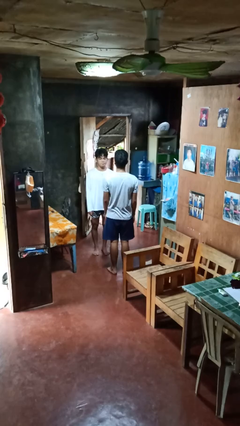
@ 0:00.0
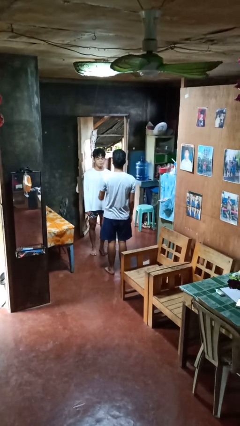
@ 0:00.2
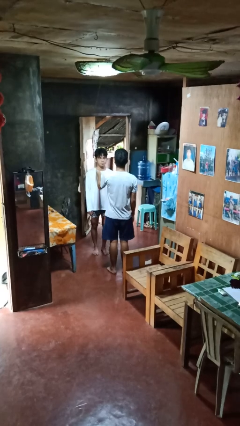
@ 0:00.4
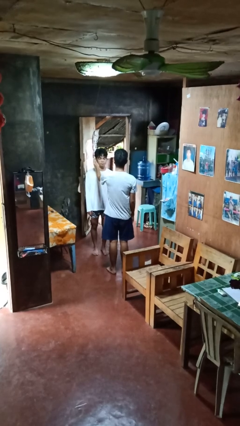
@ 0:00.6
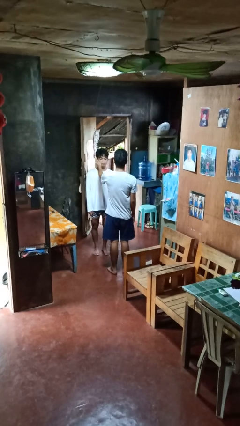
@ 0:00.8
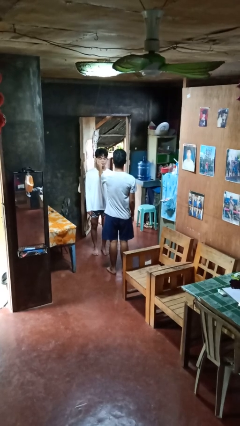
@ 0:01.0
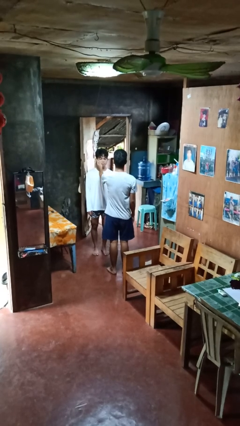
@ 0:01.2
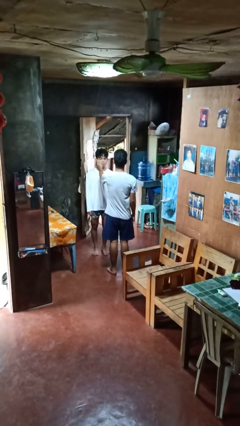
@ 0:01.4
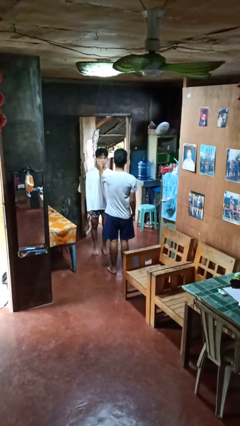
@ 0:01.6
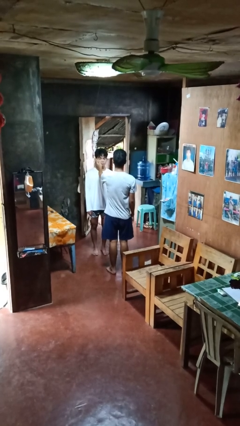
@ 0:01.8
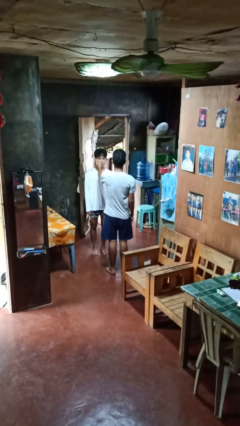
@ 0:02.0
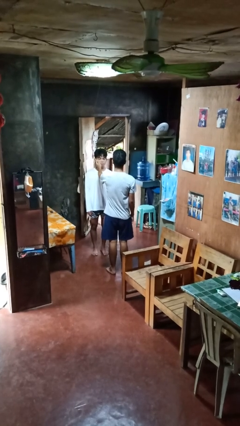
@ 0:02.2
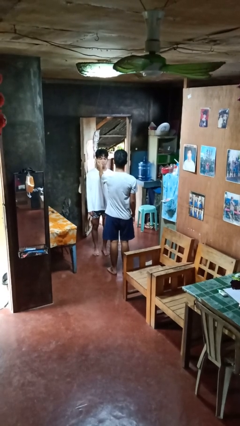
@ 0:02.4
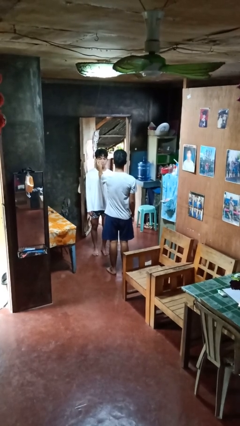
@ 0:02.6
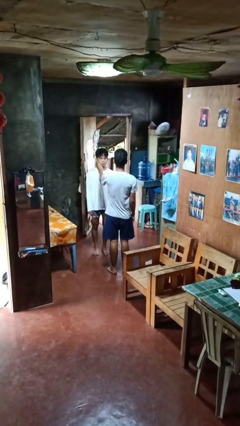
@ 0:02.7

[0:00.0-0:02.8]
person touches face of person

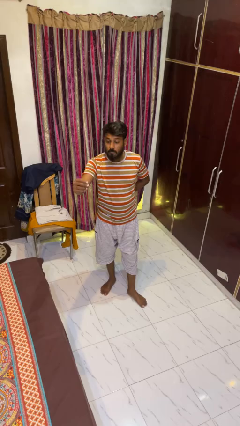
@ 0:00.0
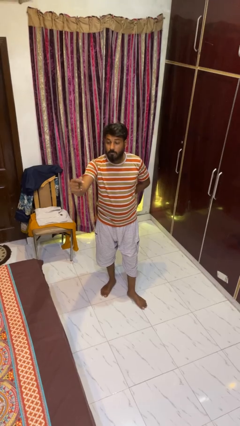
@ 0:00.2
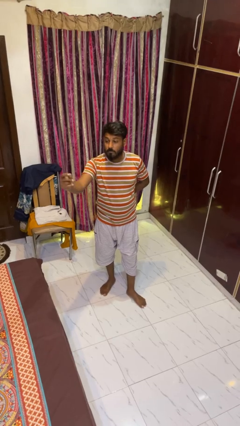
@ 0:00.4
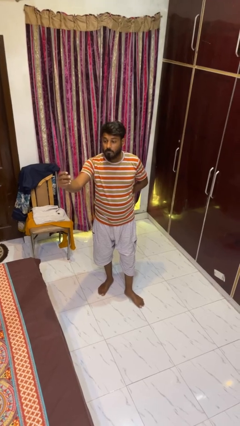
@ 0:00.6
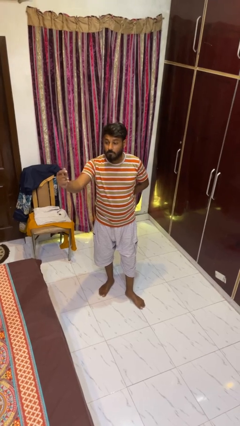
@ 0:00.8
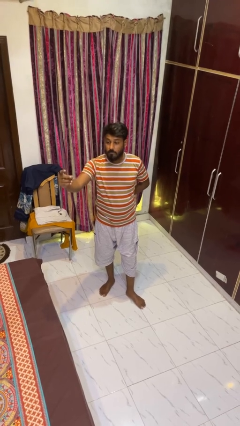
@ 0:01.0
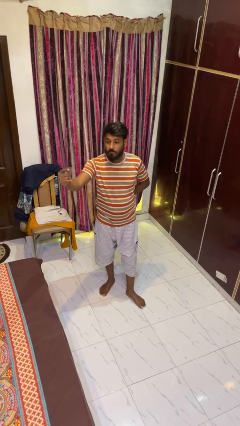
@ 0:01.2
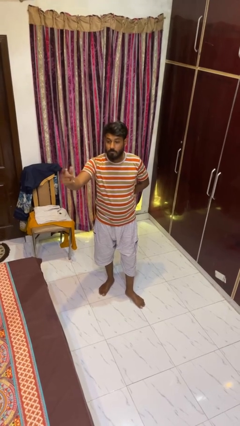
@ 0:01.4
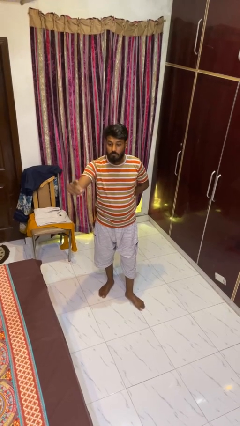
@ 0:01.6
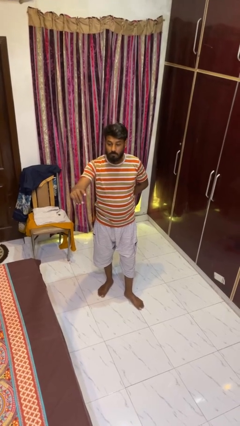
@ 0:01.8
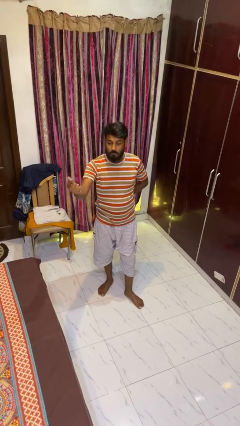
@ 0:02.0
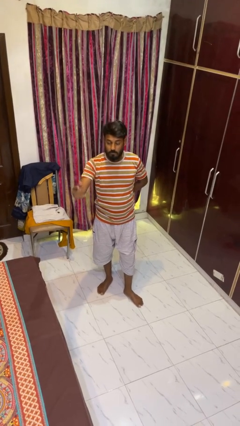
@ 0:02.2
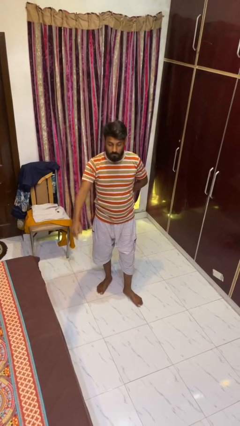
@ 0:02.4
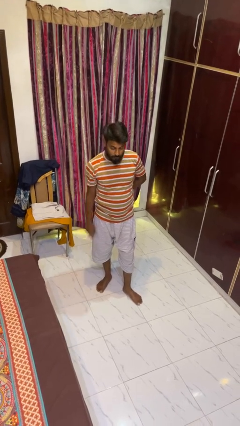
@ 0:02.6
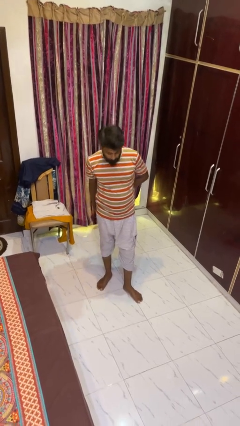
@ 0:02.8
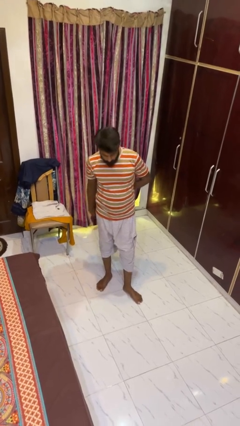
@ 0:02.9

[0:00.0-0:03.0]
person snaps fingers

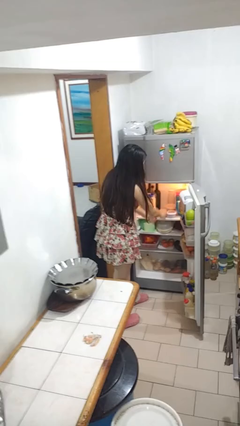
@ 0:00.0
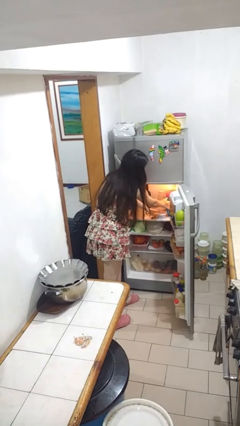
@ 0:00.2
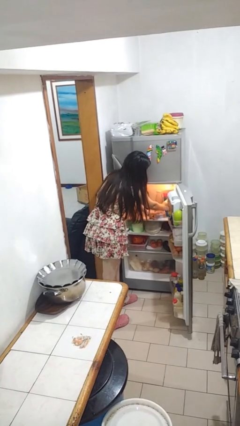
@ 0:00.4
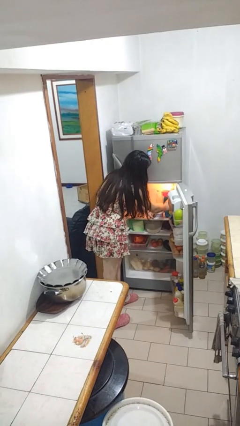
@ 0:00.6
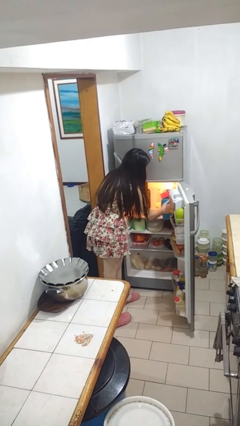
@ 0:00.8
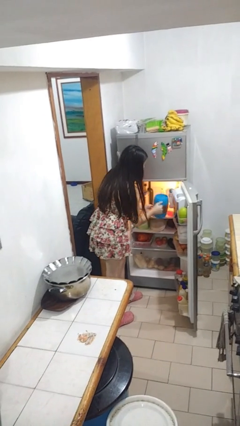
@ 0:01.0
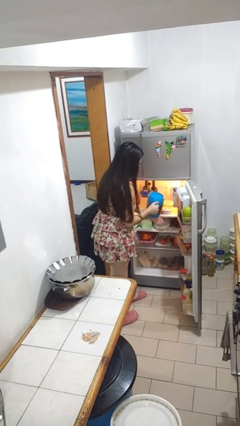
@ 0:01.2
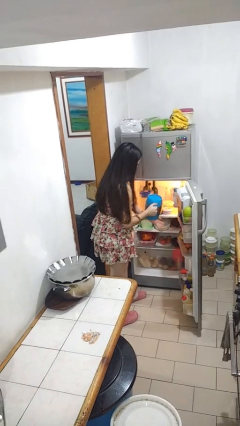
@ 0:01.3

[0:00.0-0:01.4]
person takes object from refrigerator

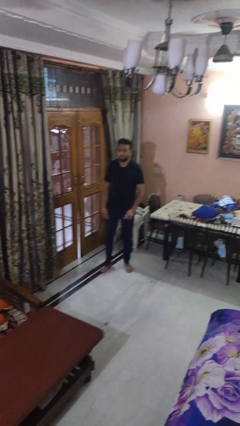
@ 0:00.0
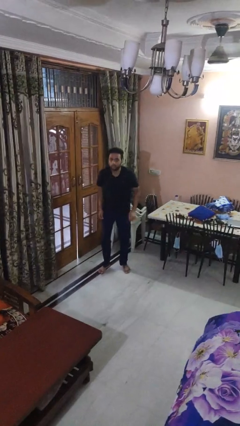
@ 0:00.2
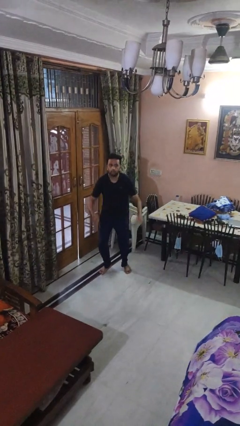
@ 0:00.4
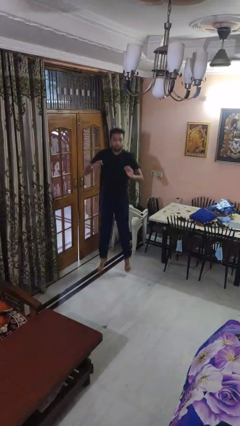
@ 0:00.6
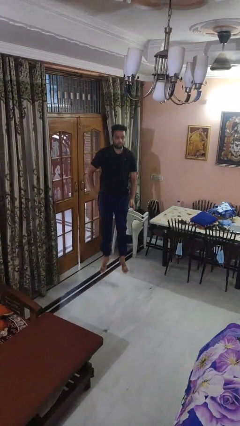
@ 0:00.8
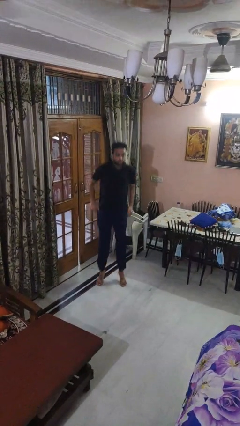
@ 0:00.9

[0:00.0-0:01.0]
person jumps

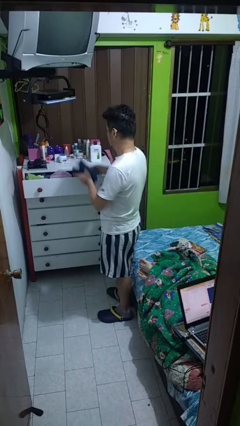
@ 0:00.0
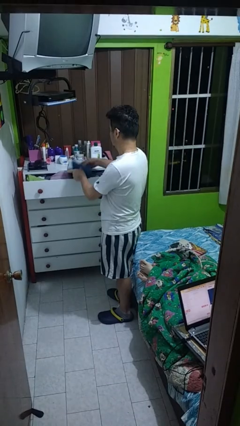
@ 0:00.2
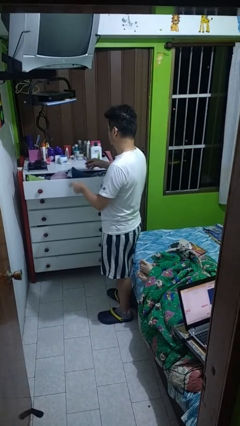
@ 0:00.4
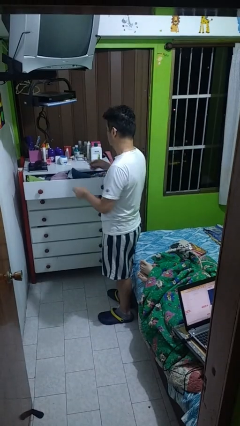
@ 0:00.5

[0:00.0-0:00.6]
person puts clothes into dresser

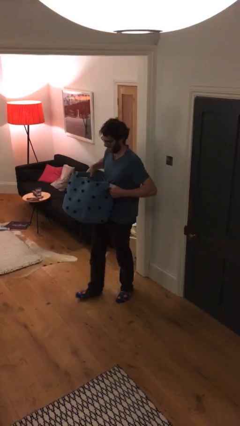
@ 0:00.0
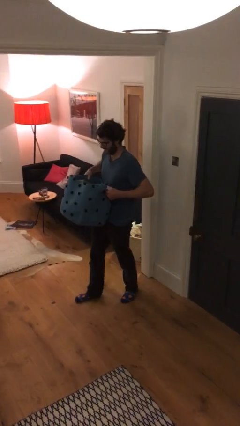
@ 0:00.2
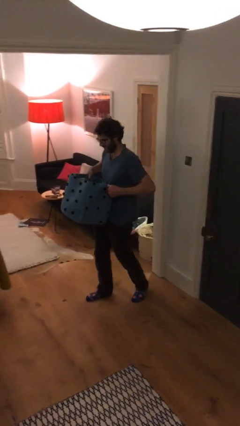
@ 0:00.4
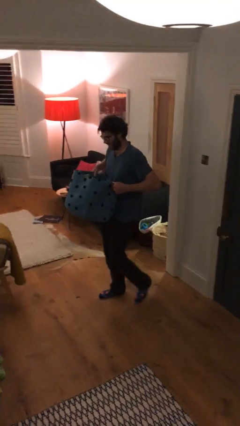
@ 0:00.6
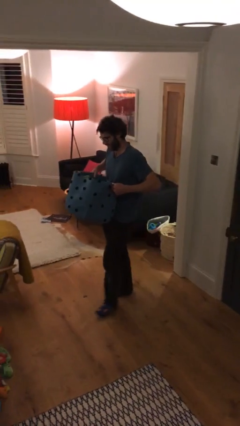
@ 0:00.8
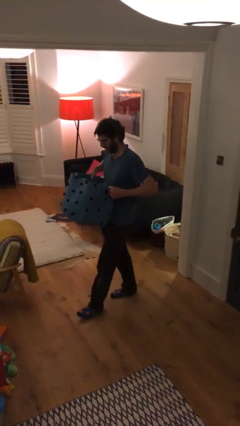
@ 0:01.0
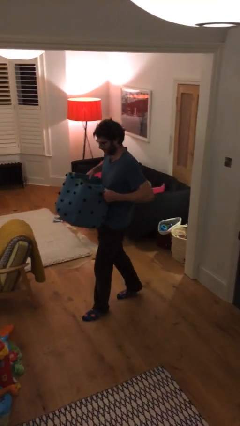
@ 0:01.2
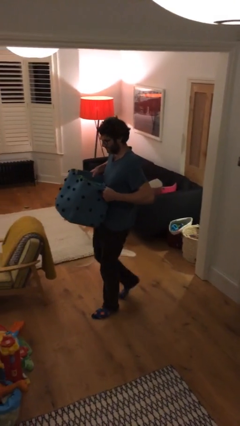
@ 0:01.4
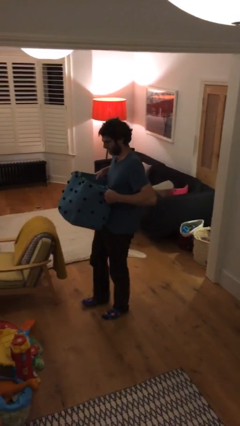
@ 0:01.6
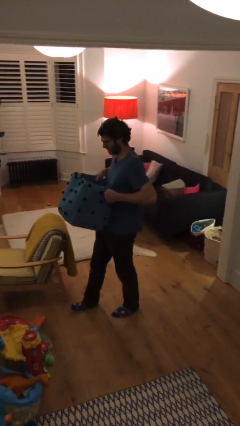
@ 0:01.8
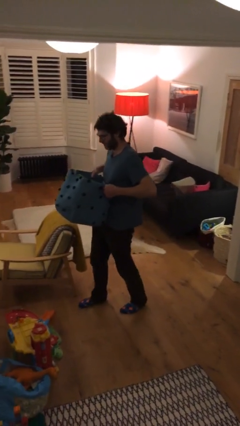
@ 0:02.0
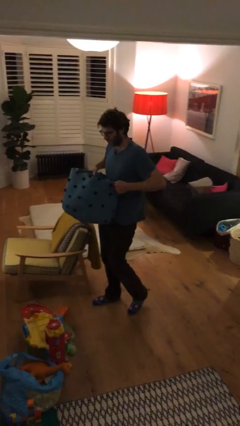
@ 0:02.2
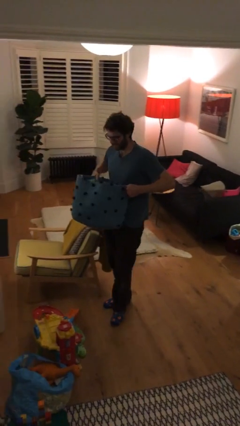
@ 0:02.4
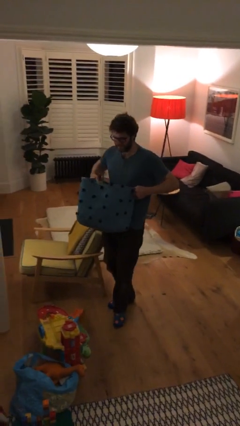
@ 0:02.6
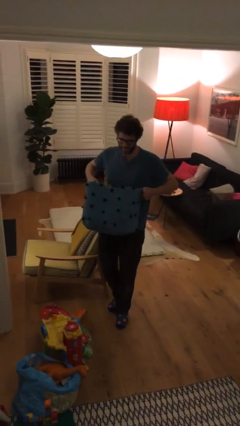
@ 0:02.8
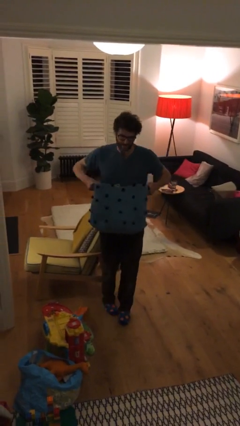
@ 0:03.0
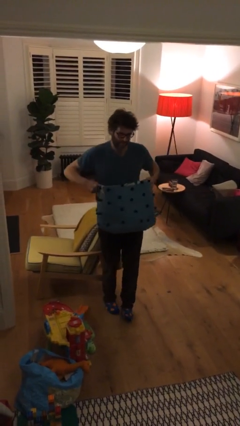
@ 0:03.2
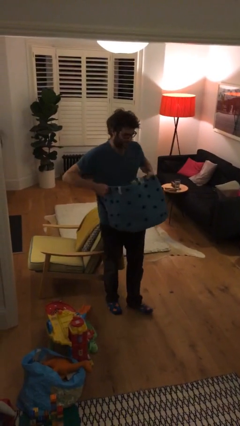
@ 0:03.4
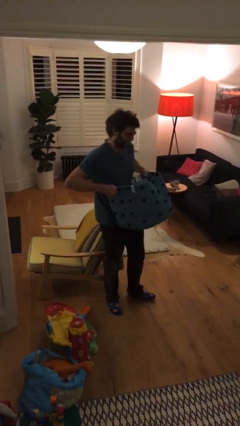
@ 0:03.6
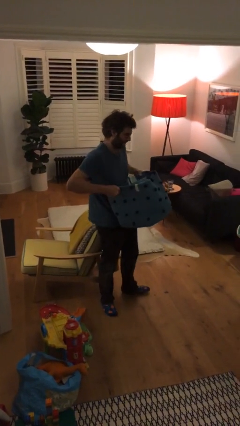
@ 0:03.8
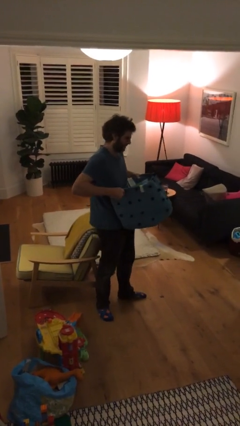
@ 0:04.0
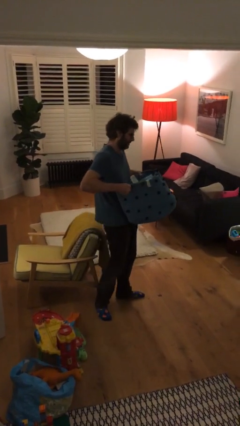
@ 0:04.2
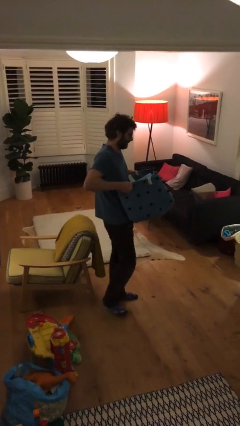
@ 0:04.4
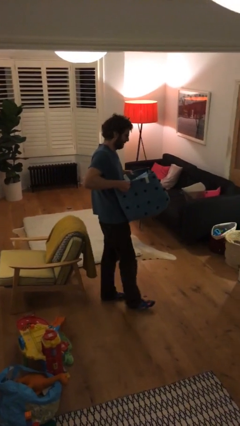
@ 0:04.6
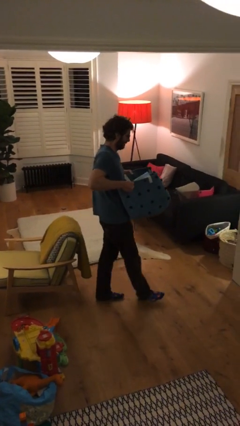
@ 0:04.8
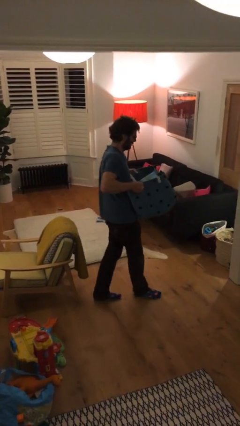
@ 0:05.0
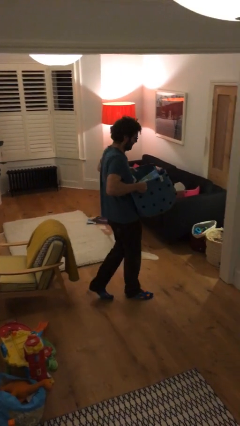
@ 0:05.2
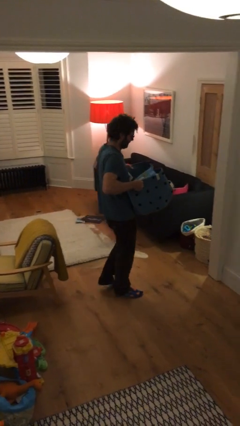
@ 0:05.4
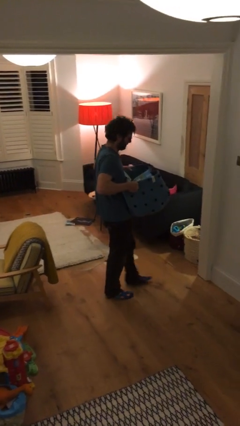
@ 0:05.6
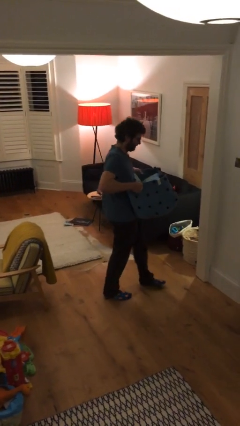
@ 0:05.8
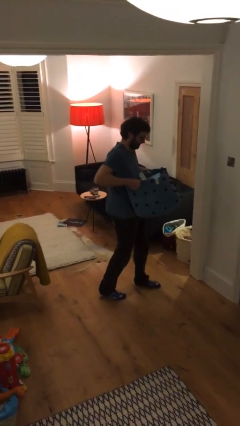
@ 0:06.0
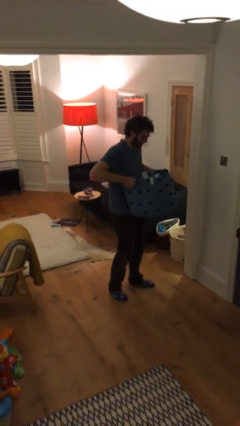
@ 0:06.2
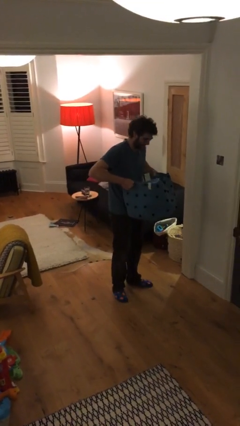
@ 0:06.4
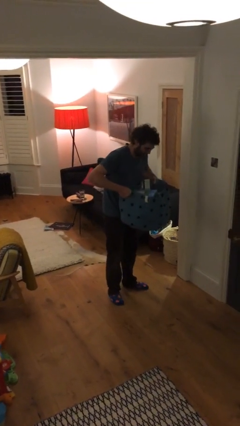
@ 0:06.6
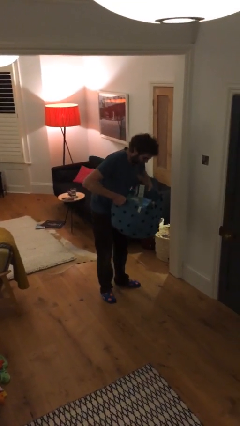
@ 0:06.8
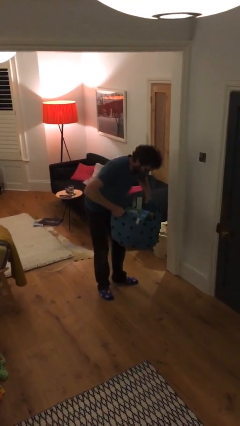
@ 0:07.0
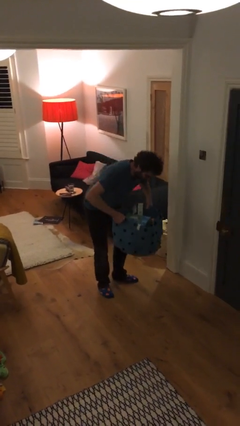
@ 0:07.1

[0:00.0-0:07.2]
person carries heavy object

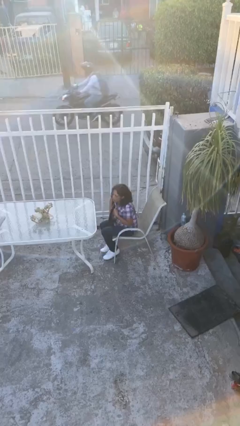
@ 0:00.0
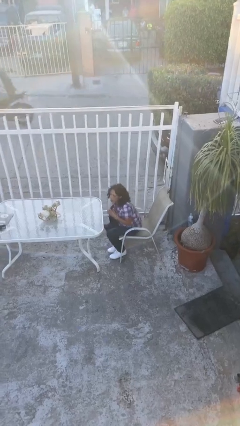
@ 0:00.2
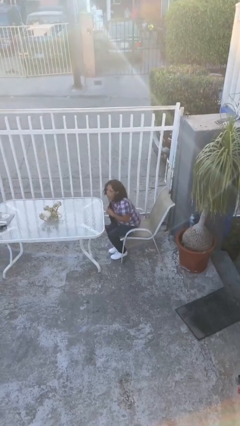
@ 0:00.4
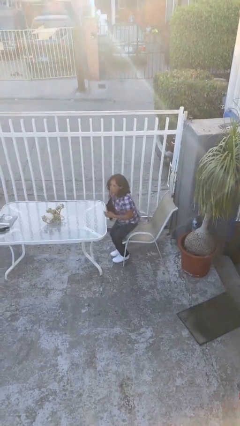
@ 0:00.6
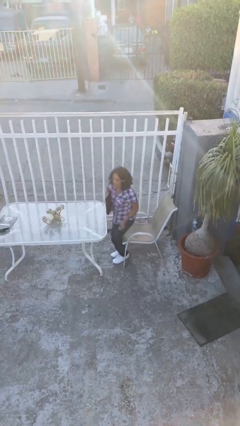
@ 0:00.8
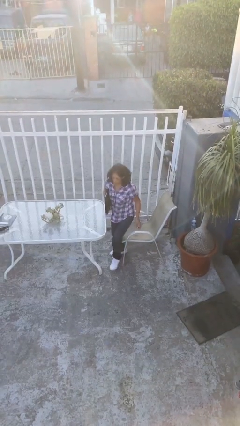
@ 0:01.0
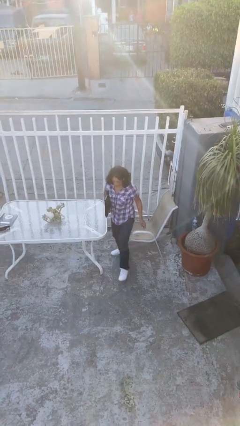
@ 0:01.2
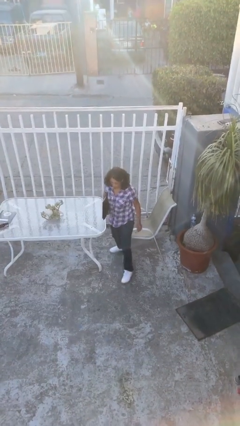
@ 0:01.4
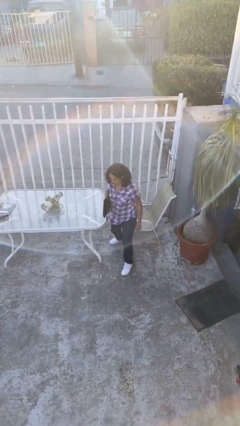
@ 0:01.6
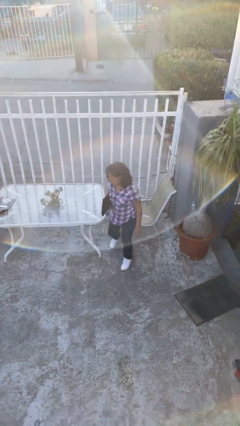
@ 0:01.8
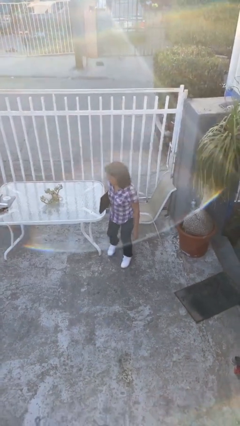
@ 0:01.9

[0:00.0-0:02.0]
person stands up
